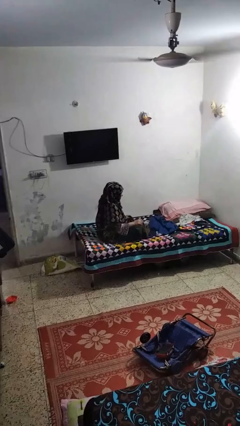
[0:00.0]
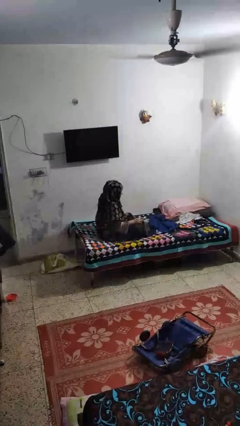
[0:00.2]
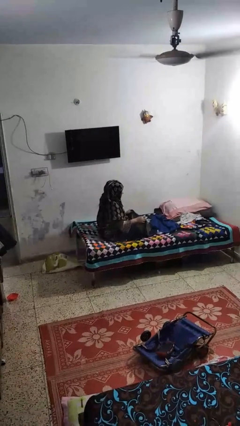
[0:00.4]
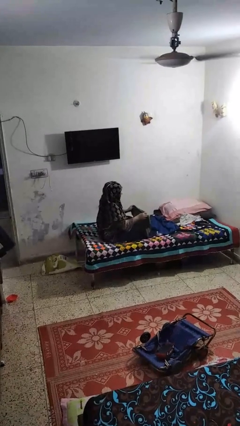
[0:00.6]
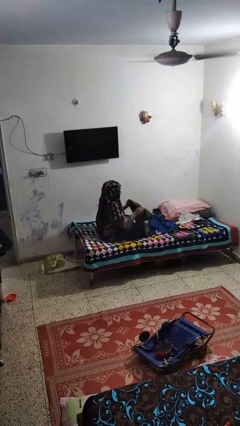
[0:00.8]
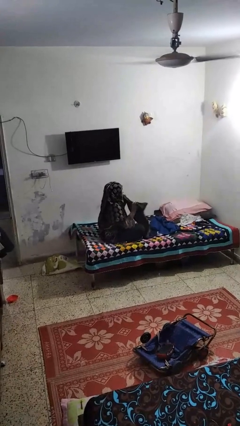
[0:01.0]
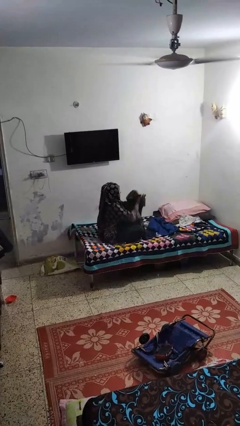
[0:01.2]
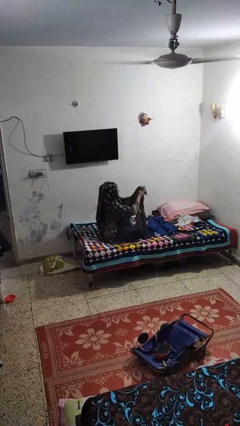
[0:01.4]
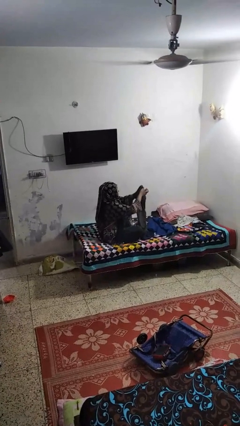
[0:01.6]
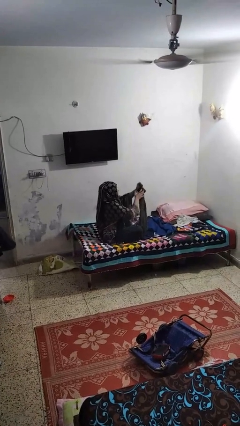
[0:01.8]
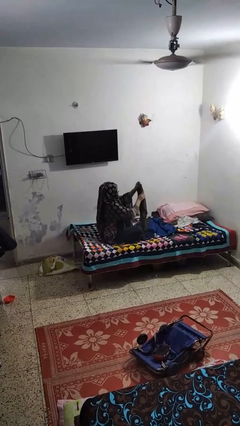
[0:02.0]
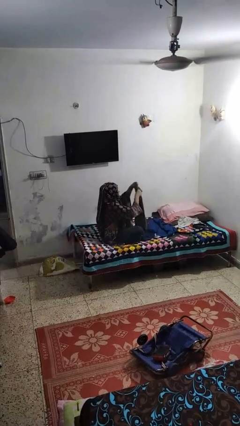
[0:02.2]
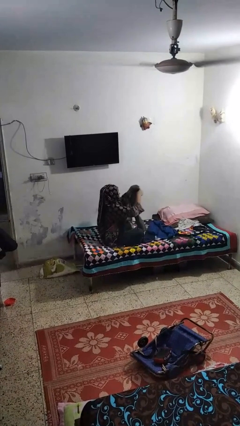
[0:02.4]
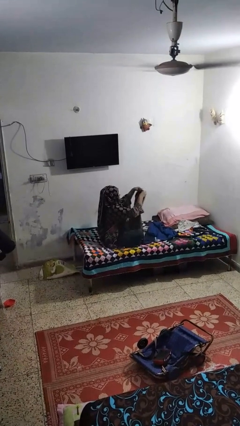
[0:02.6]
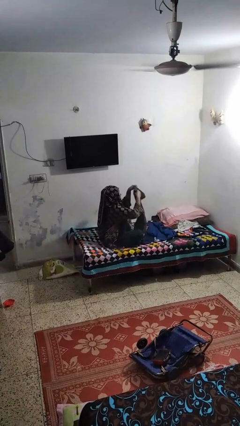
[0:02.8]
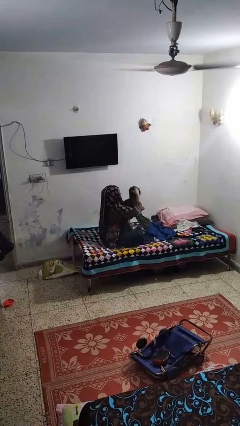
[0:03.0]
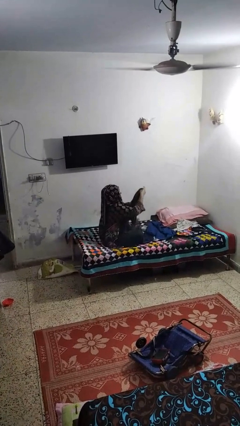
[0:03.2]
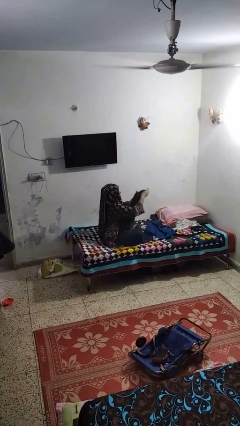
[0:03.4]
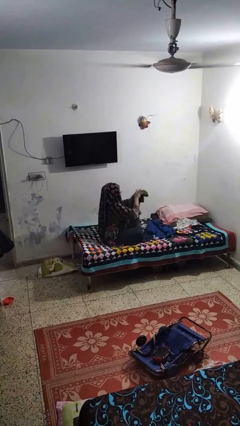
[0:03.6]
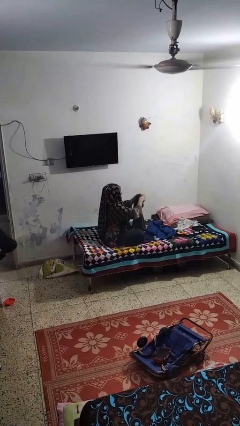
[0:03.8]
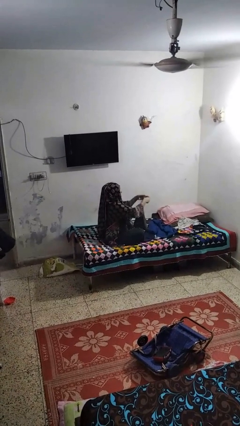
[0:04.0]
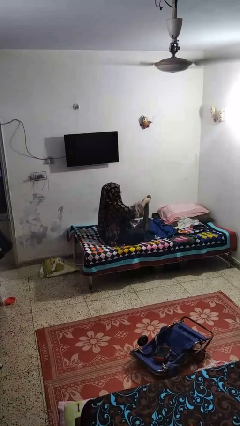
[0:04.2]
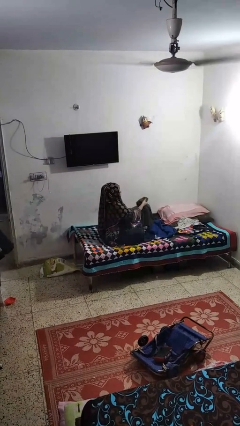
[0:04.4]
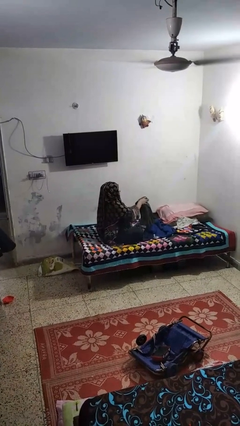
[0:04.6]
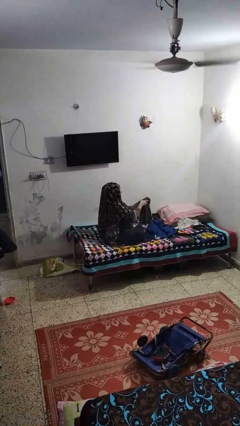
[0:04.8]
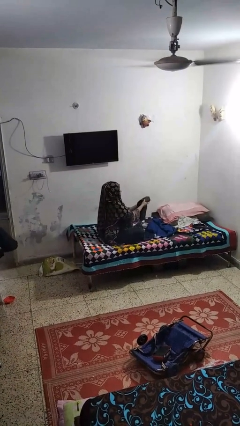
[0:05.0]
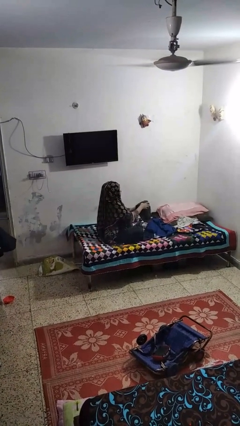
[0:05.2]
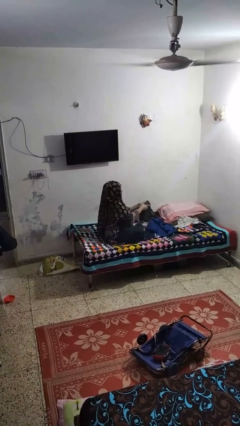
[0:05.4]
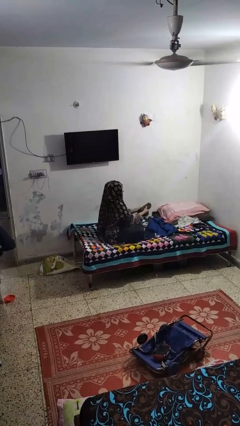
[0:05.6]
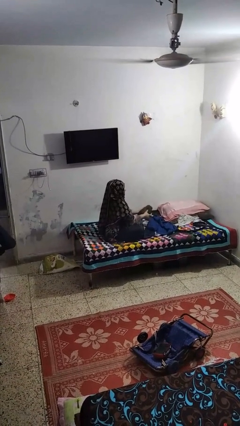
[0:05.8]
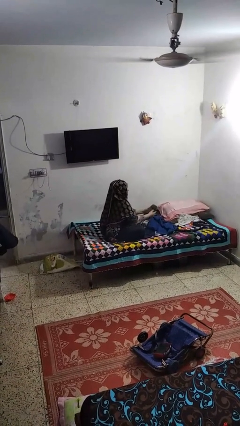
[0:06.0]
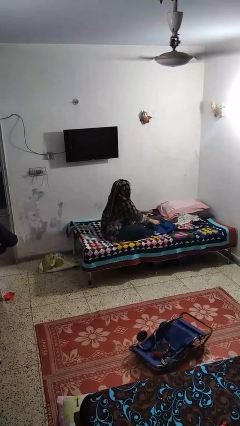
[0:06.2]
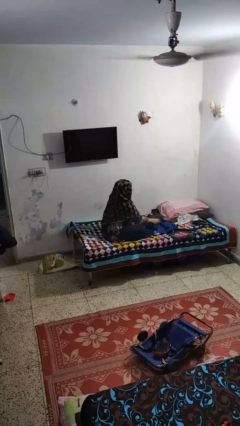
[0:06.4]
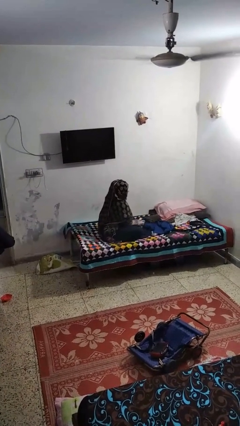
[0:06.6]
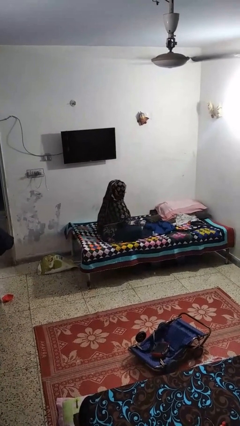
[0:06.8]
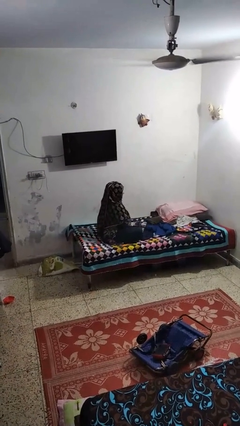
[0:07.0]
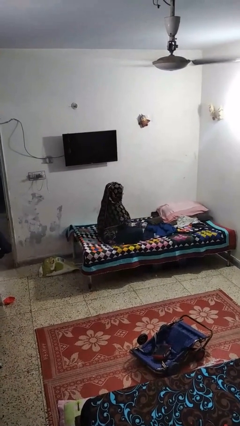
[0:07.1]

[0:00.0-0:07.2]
person folds shirt

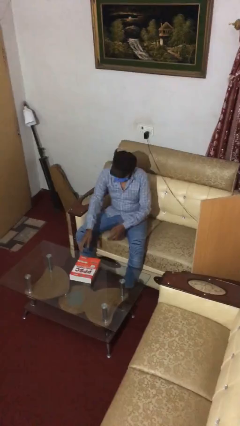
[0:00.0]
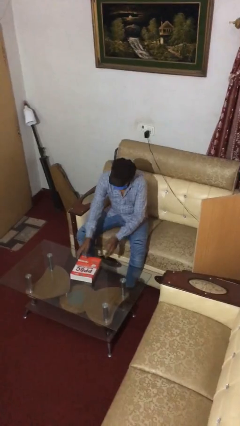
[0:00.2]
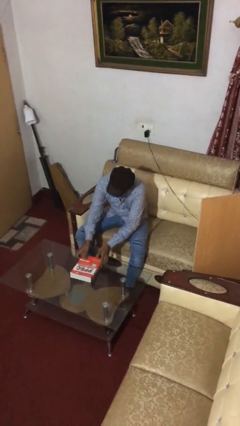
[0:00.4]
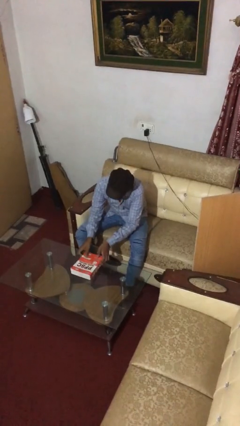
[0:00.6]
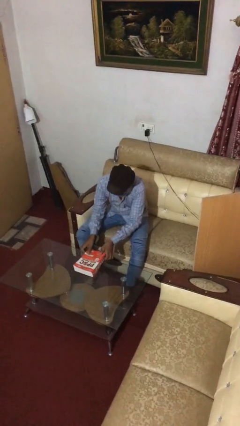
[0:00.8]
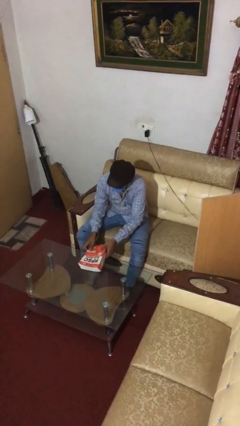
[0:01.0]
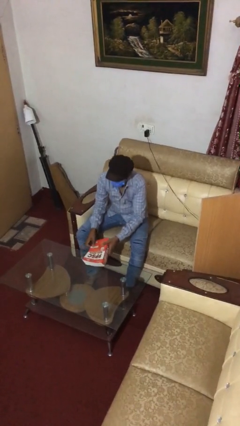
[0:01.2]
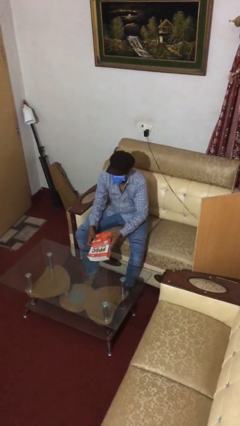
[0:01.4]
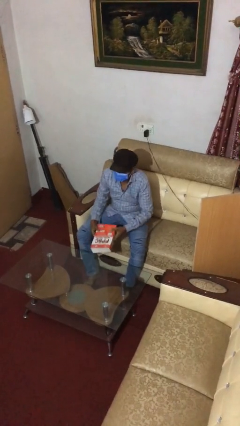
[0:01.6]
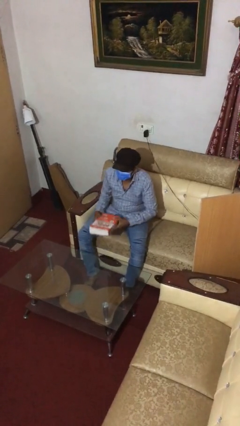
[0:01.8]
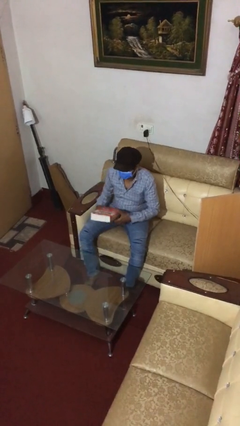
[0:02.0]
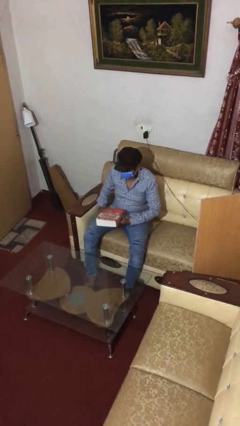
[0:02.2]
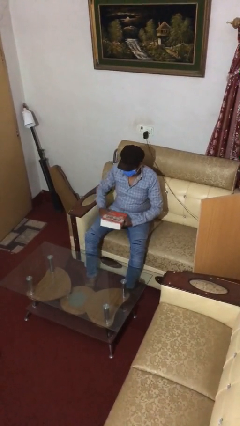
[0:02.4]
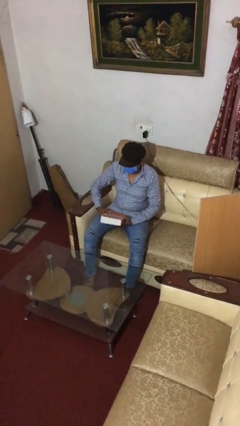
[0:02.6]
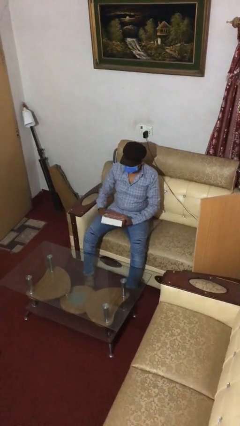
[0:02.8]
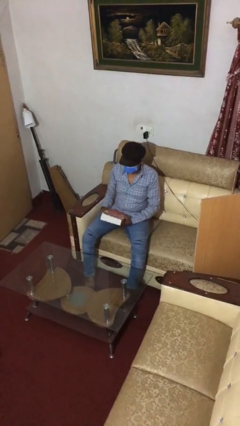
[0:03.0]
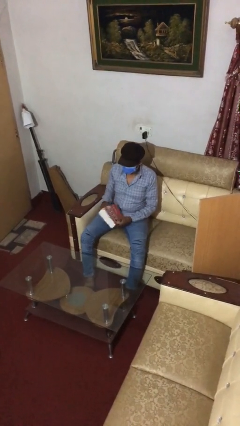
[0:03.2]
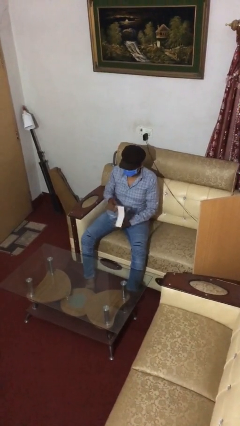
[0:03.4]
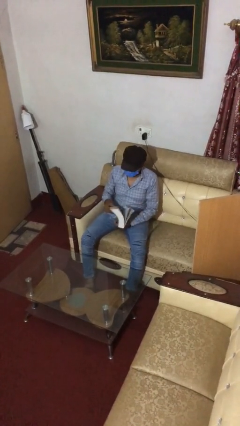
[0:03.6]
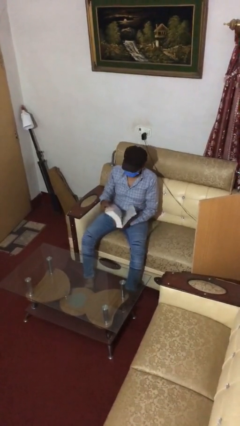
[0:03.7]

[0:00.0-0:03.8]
person picks up object from table

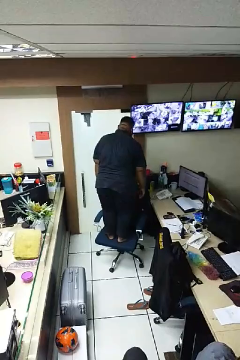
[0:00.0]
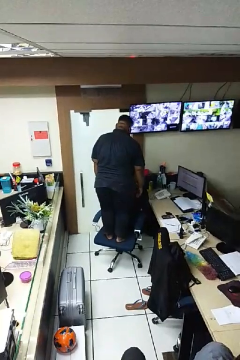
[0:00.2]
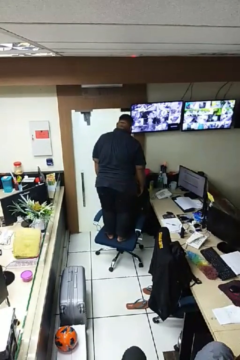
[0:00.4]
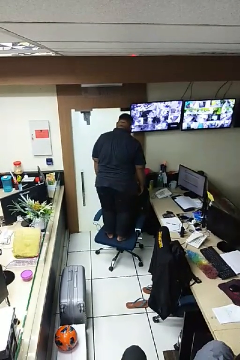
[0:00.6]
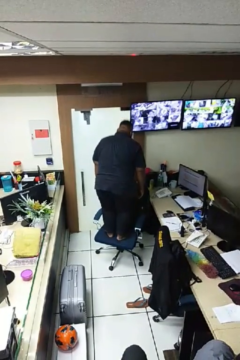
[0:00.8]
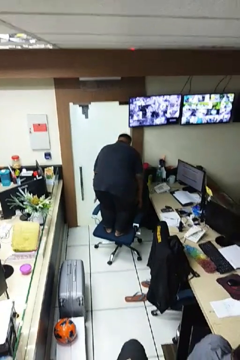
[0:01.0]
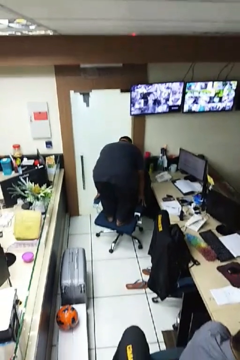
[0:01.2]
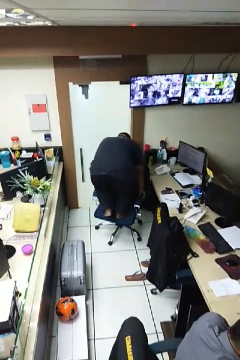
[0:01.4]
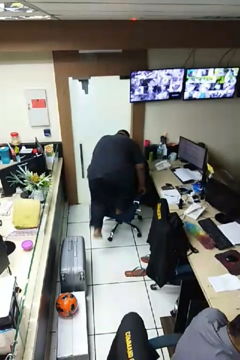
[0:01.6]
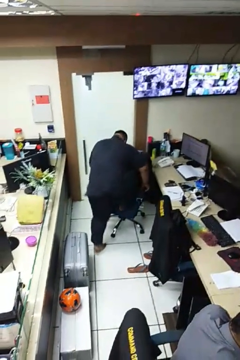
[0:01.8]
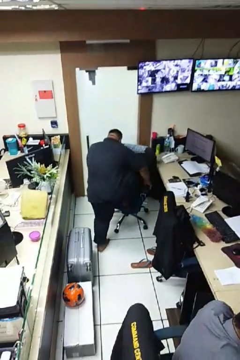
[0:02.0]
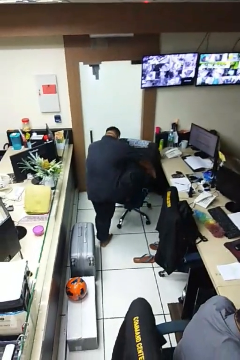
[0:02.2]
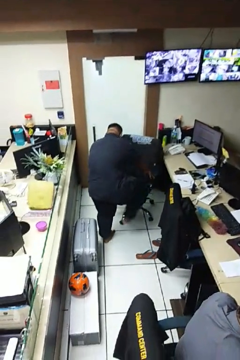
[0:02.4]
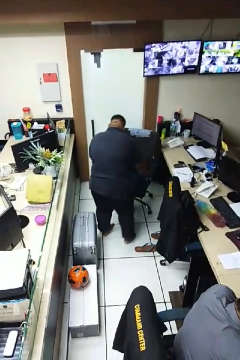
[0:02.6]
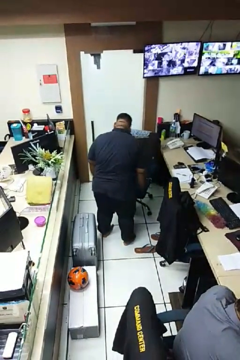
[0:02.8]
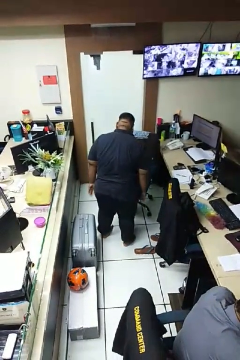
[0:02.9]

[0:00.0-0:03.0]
person climbs off chair

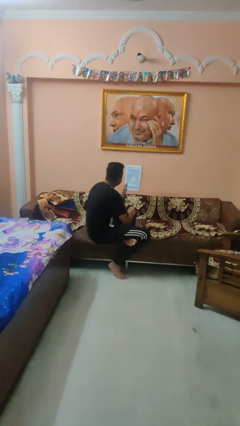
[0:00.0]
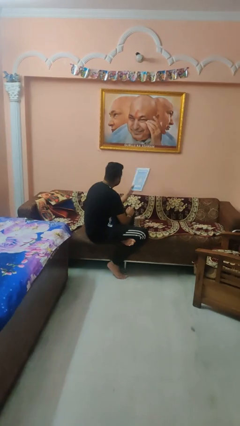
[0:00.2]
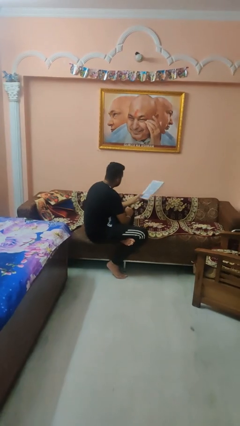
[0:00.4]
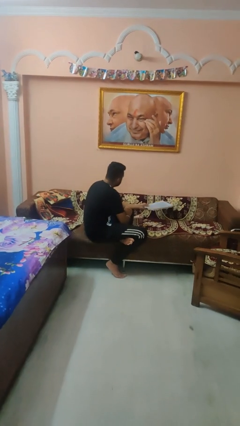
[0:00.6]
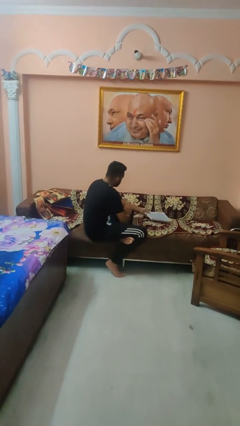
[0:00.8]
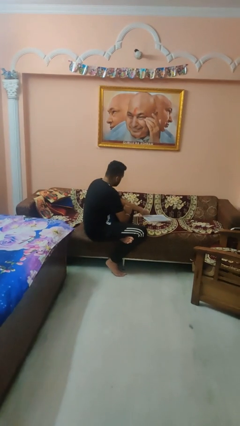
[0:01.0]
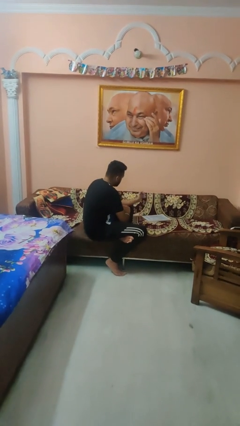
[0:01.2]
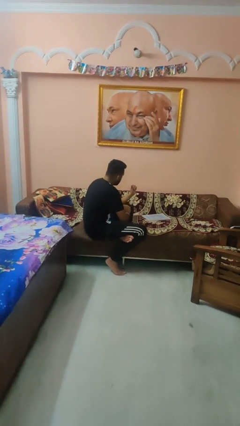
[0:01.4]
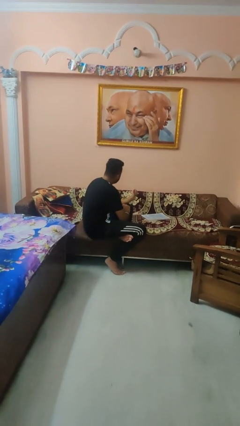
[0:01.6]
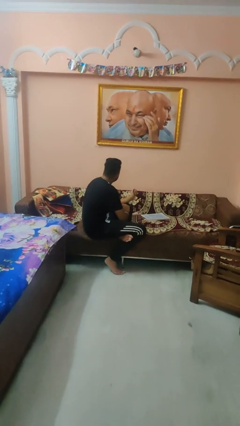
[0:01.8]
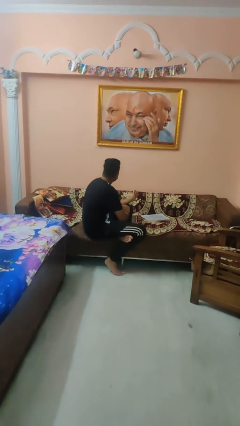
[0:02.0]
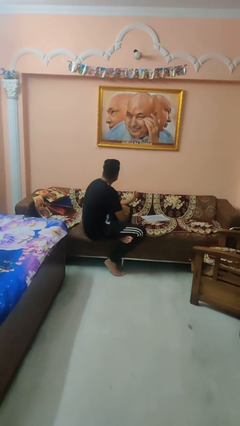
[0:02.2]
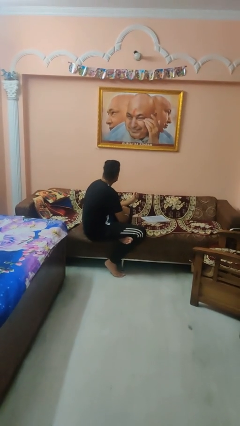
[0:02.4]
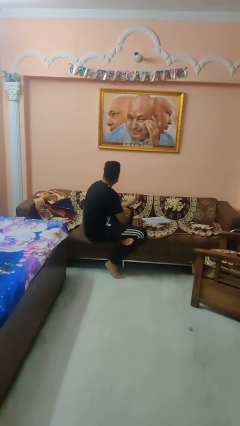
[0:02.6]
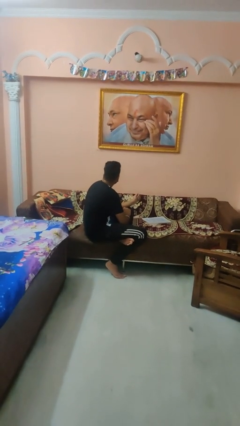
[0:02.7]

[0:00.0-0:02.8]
person puts down object on couch

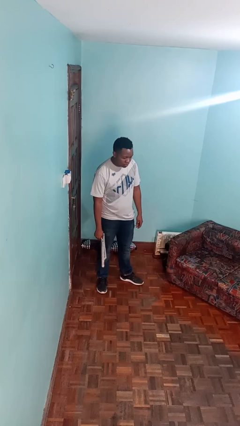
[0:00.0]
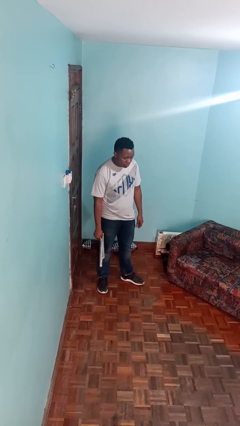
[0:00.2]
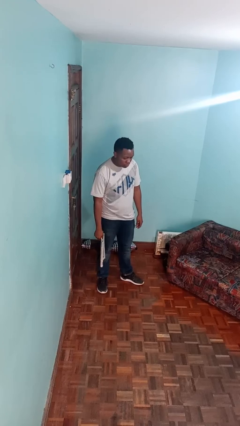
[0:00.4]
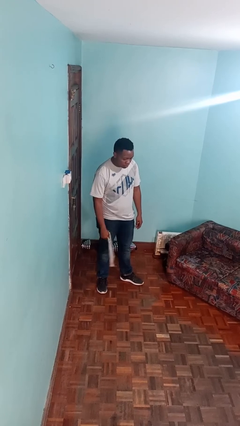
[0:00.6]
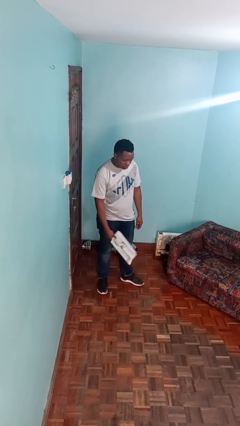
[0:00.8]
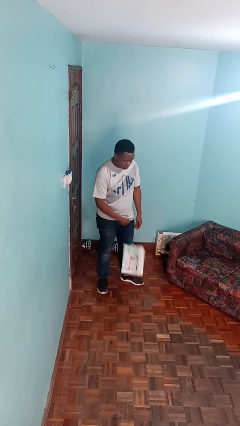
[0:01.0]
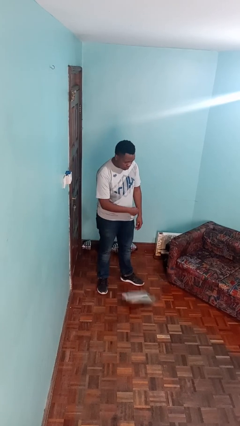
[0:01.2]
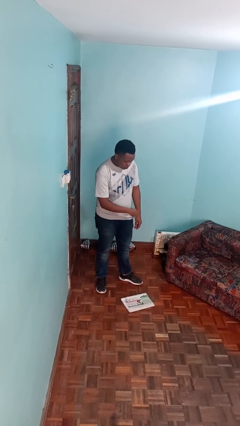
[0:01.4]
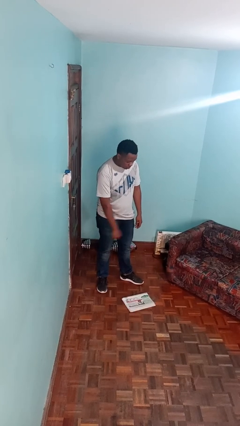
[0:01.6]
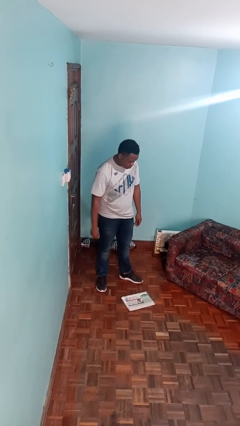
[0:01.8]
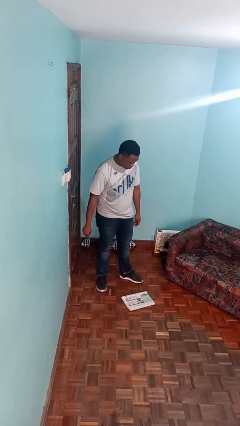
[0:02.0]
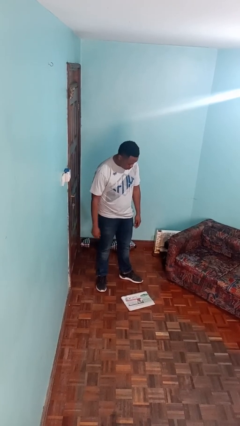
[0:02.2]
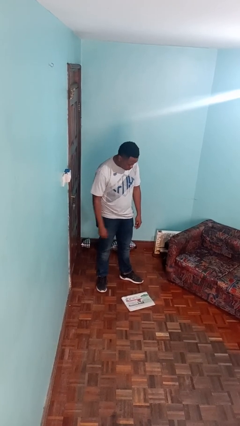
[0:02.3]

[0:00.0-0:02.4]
person drops object
